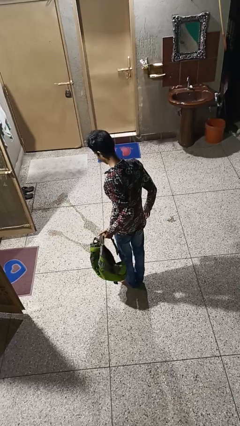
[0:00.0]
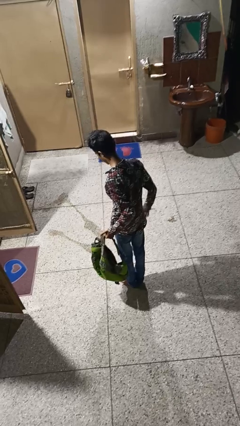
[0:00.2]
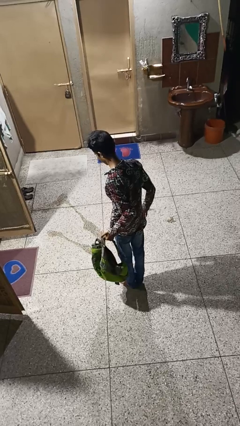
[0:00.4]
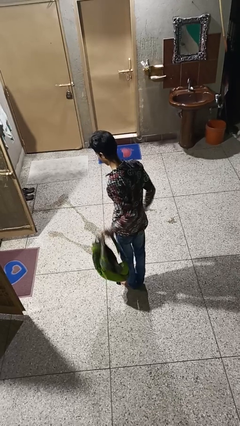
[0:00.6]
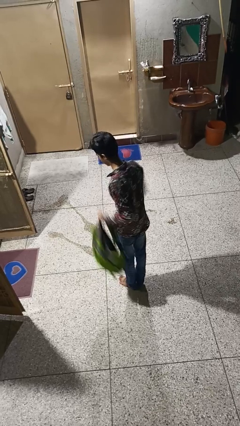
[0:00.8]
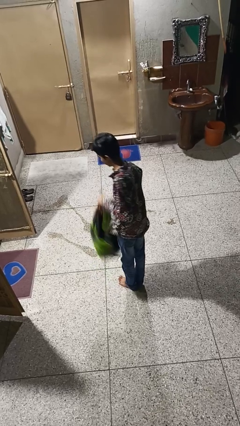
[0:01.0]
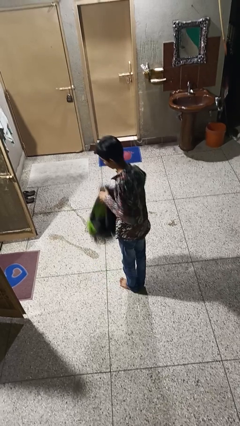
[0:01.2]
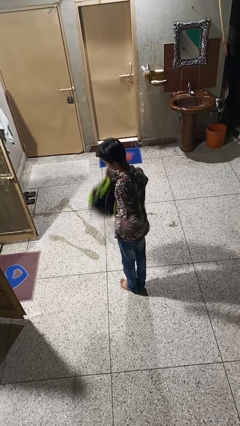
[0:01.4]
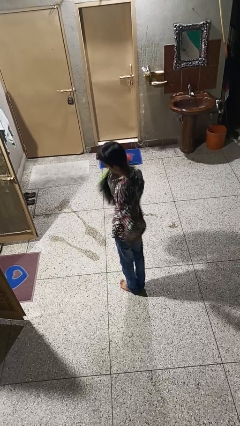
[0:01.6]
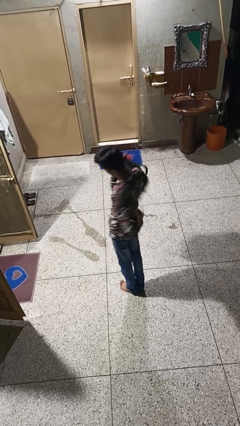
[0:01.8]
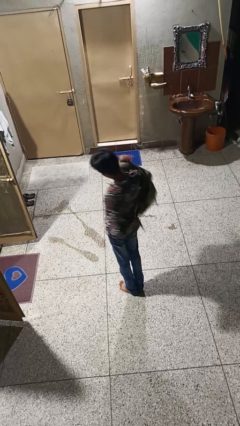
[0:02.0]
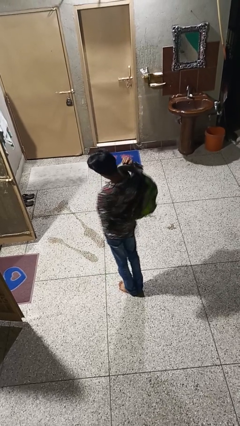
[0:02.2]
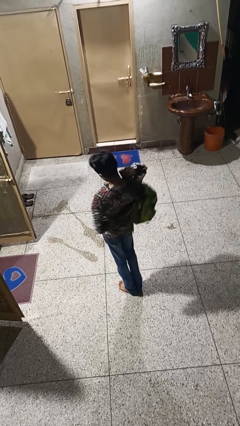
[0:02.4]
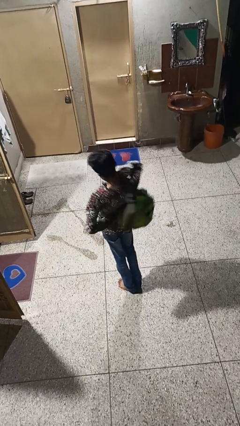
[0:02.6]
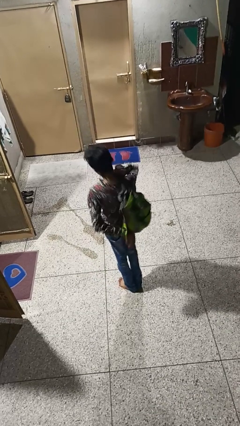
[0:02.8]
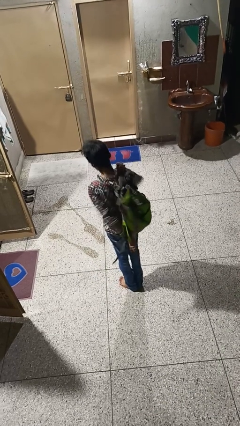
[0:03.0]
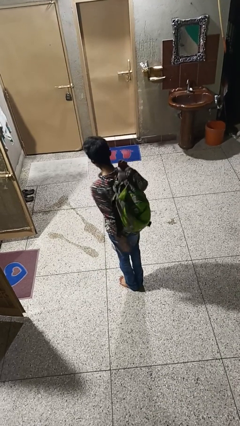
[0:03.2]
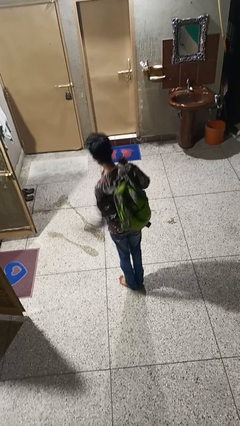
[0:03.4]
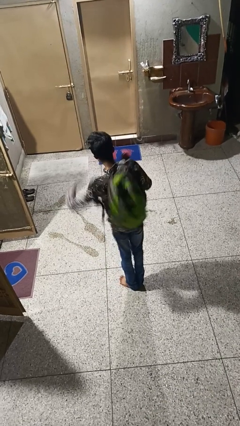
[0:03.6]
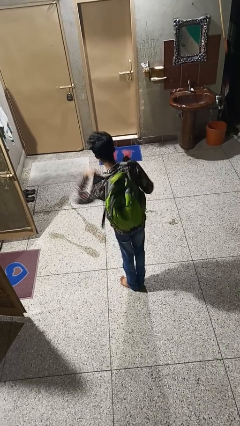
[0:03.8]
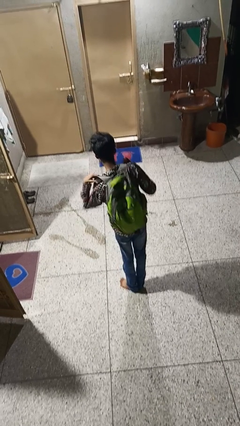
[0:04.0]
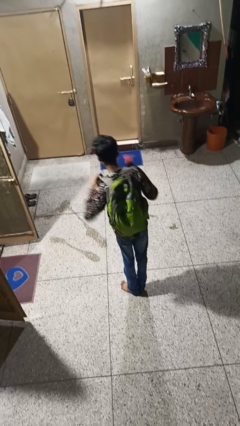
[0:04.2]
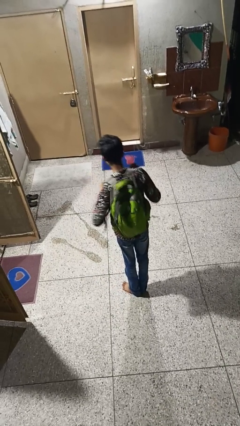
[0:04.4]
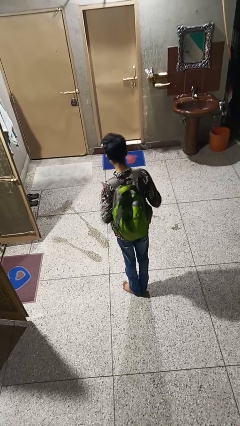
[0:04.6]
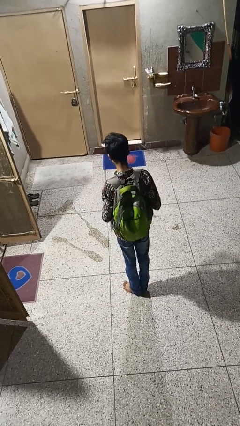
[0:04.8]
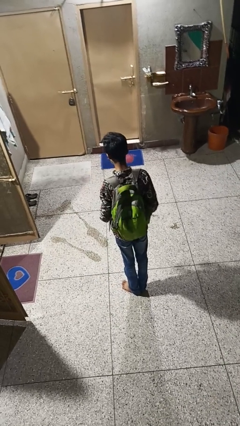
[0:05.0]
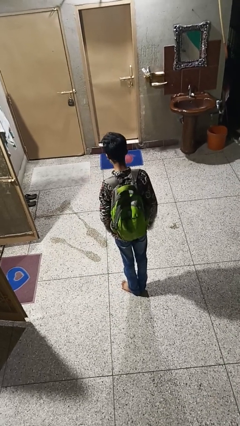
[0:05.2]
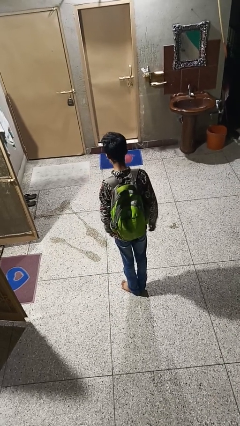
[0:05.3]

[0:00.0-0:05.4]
person puts on backpack

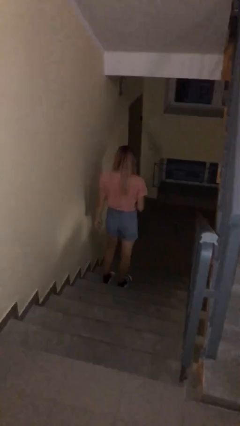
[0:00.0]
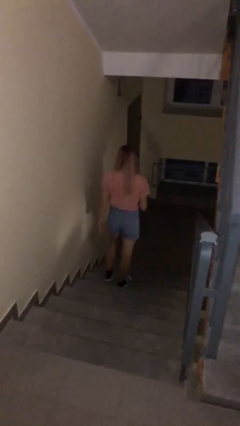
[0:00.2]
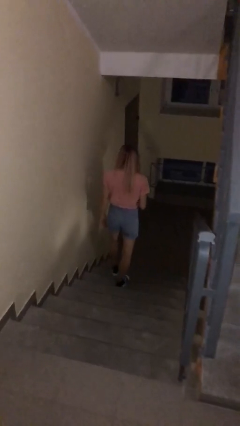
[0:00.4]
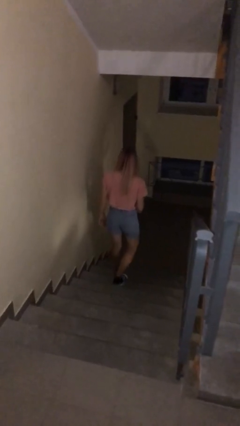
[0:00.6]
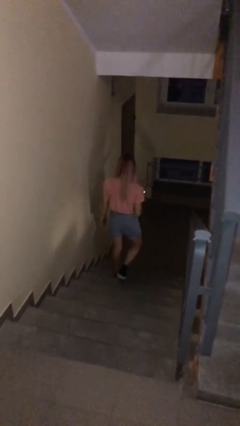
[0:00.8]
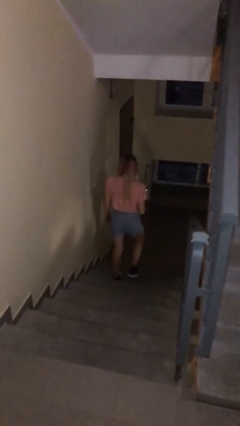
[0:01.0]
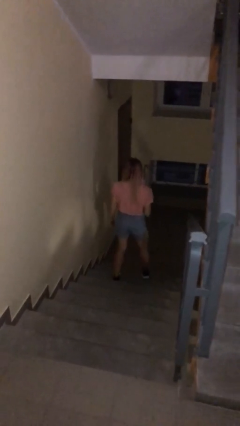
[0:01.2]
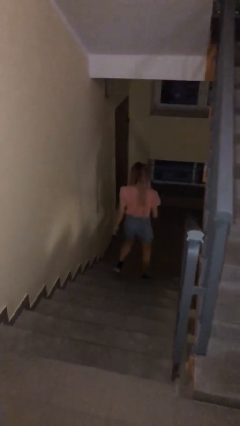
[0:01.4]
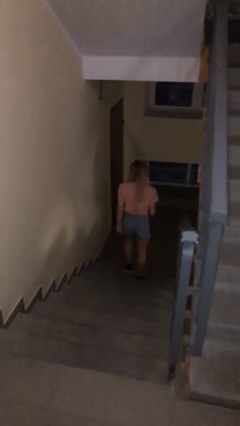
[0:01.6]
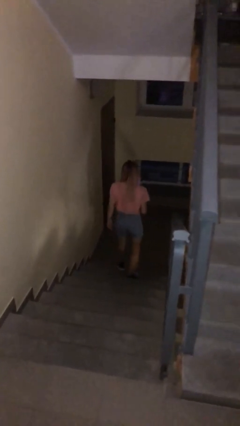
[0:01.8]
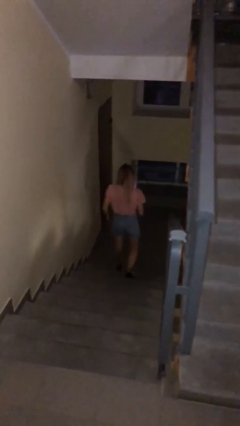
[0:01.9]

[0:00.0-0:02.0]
person climbs down stairs

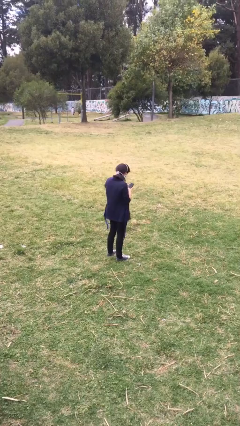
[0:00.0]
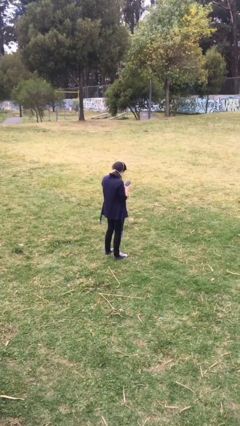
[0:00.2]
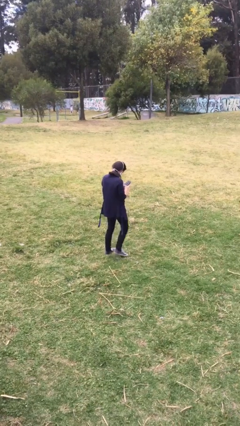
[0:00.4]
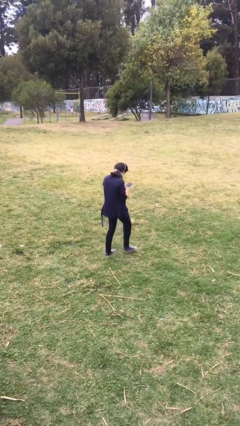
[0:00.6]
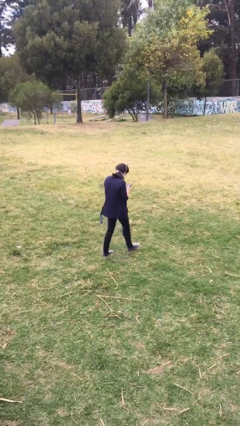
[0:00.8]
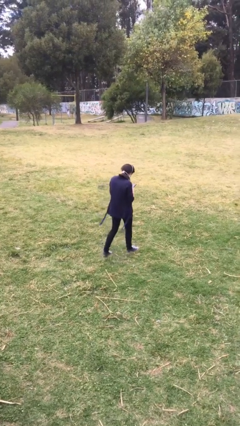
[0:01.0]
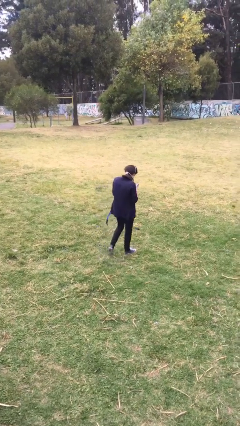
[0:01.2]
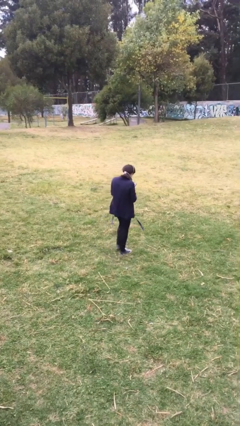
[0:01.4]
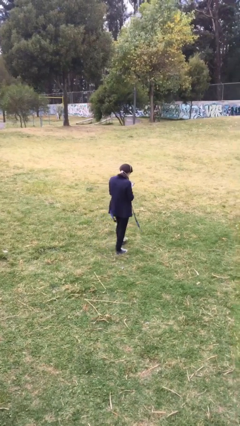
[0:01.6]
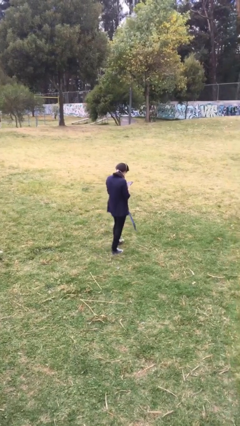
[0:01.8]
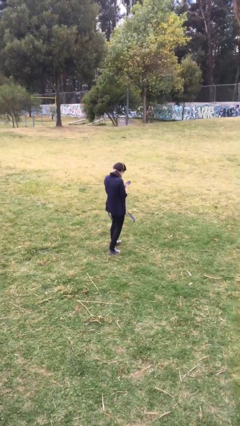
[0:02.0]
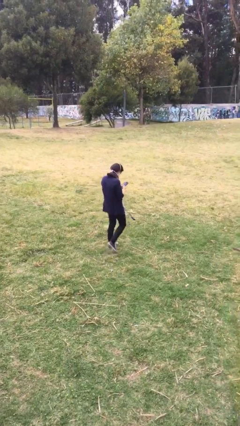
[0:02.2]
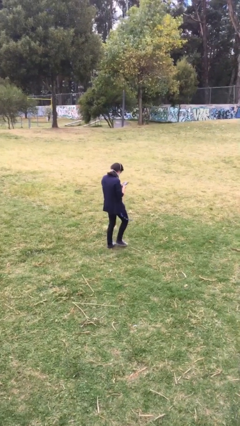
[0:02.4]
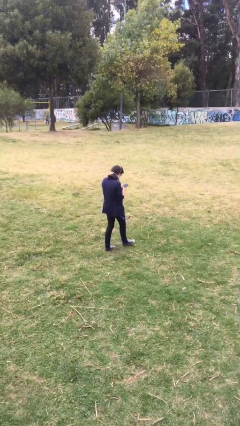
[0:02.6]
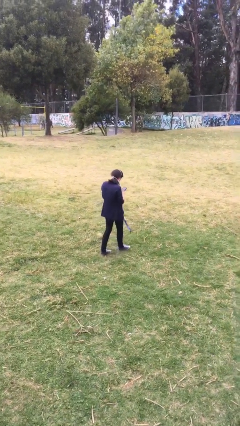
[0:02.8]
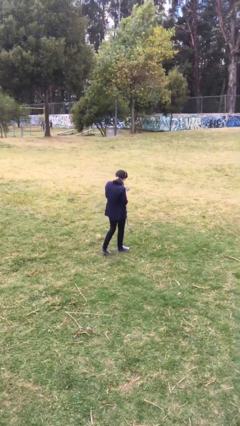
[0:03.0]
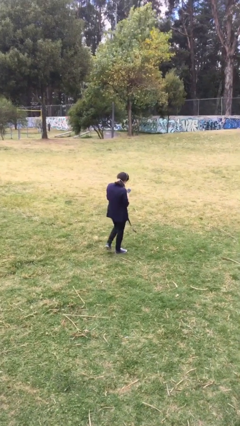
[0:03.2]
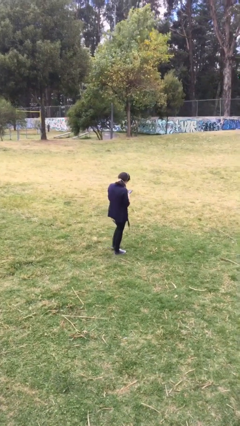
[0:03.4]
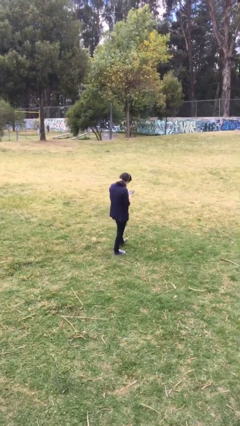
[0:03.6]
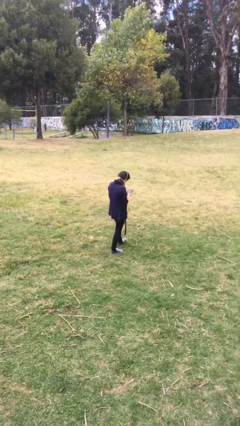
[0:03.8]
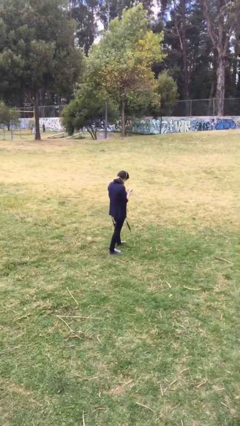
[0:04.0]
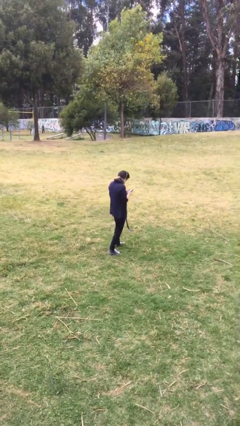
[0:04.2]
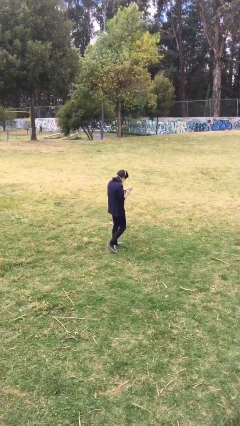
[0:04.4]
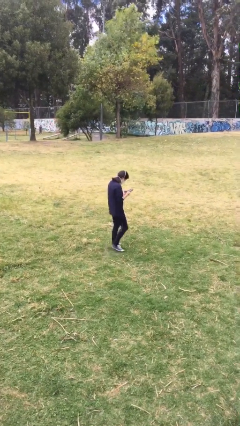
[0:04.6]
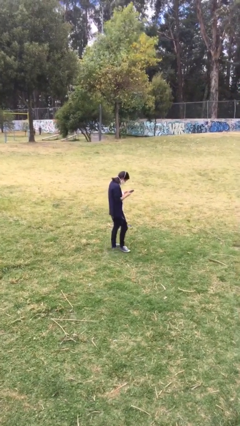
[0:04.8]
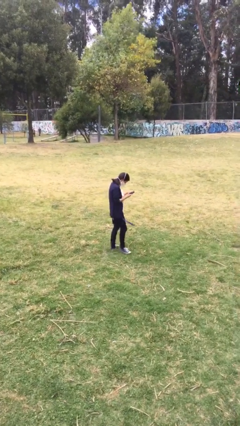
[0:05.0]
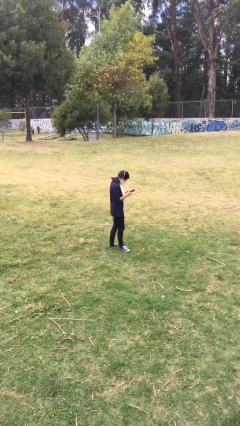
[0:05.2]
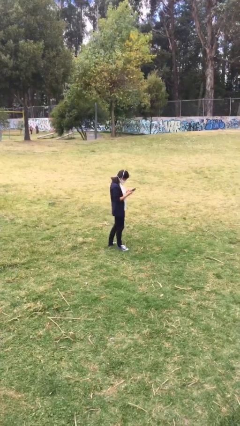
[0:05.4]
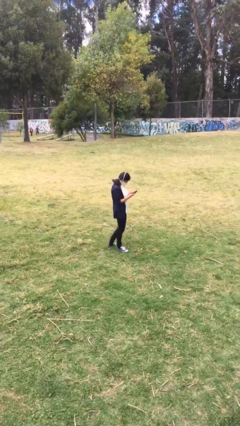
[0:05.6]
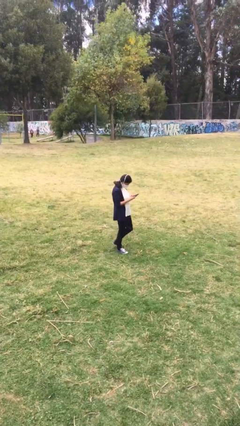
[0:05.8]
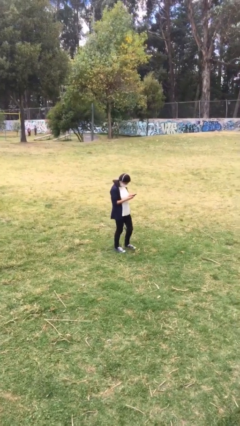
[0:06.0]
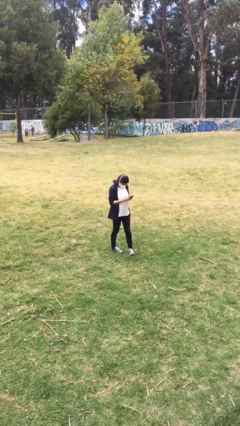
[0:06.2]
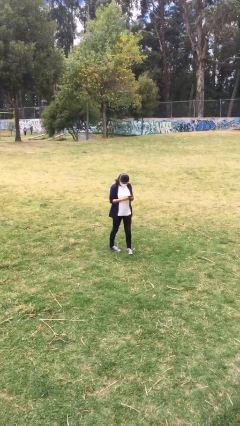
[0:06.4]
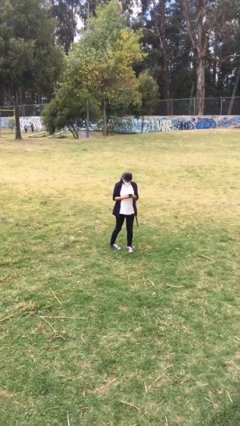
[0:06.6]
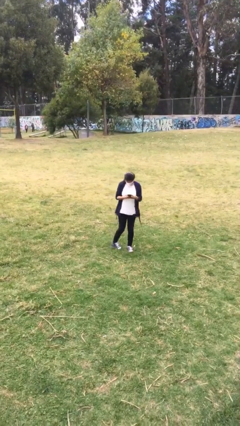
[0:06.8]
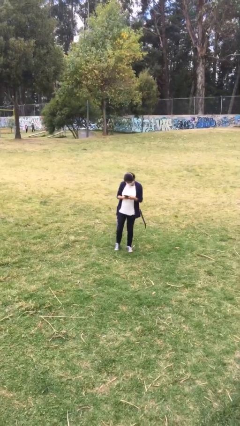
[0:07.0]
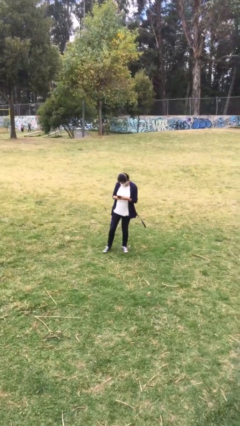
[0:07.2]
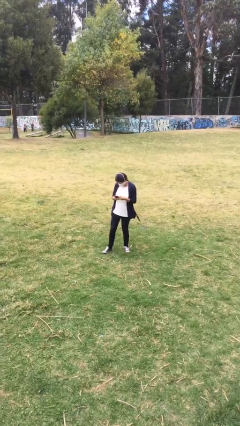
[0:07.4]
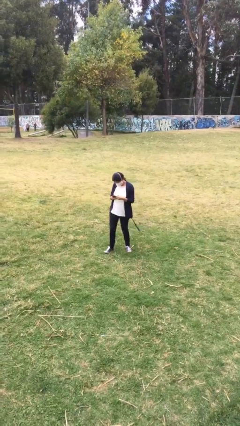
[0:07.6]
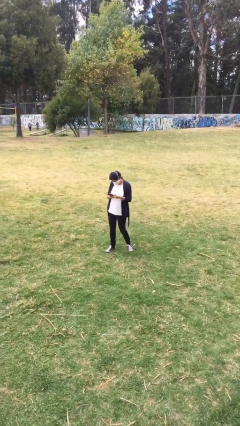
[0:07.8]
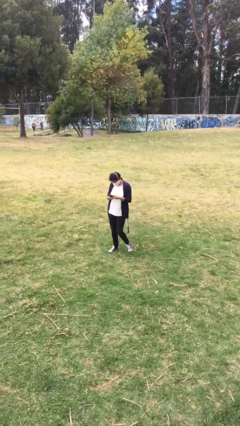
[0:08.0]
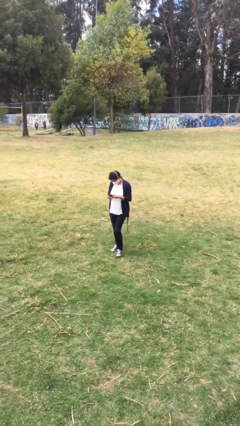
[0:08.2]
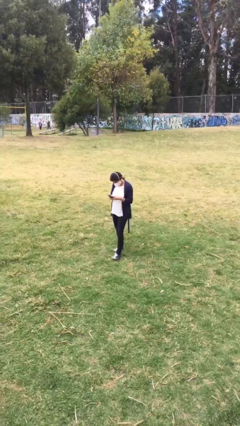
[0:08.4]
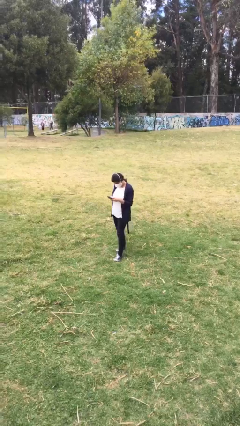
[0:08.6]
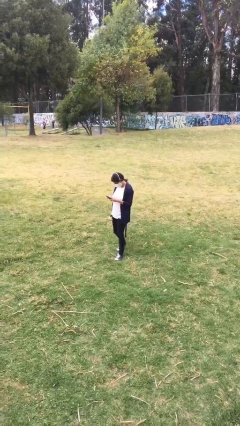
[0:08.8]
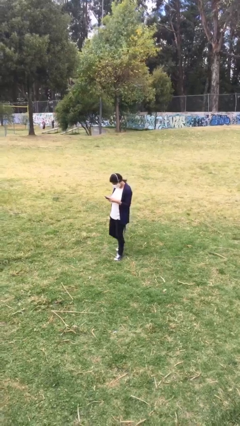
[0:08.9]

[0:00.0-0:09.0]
person texts on phone

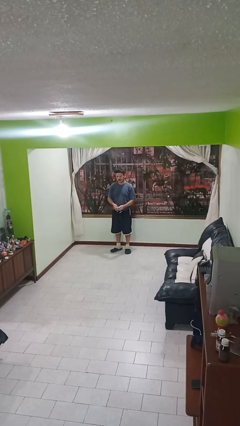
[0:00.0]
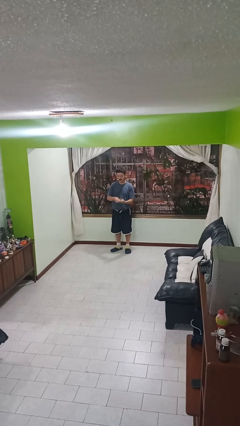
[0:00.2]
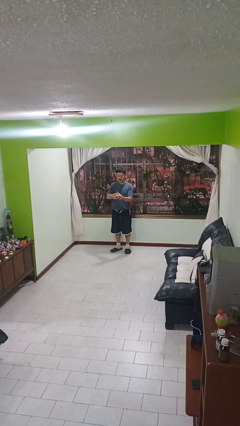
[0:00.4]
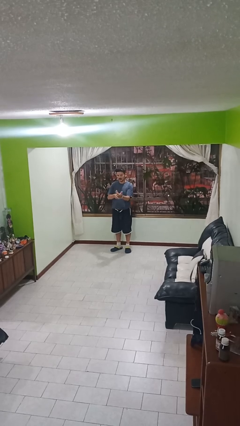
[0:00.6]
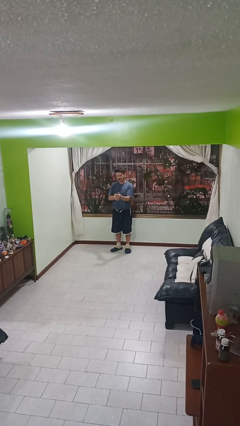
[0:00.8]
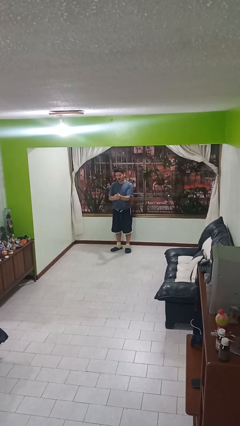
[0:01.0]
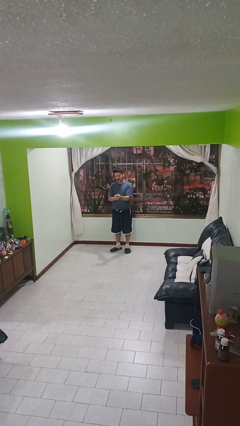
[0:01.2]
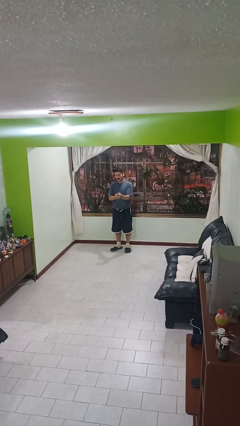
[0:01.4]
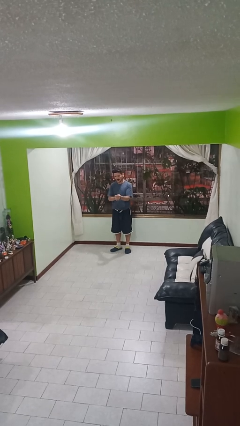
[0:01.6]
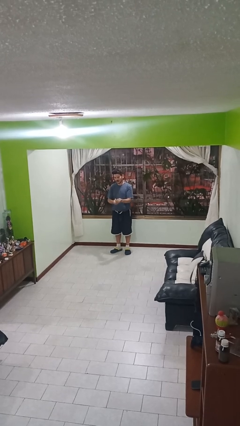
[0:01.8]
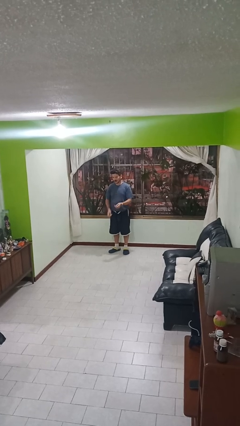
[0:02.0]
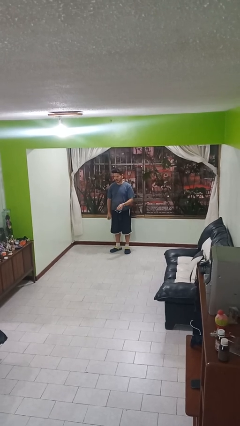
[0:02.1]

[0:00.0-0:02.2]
person puts on wristwatch
